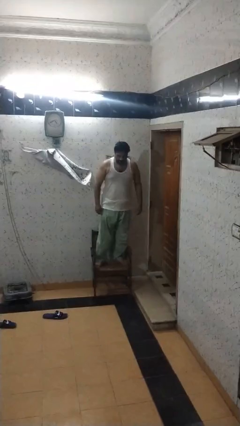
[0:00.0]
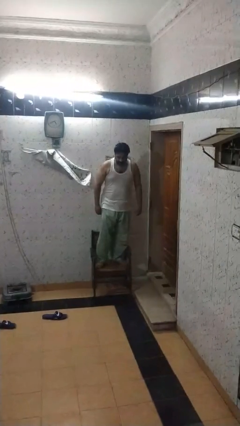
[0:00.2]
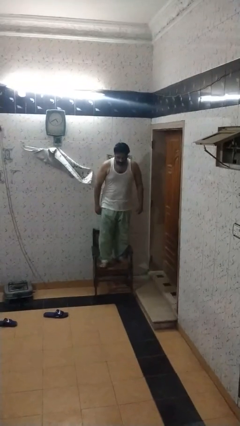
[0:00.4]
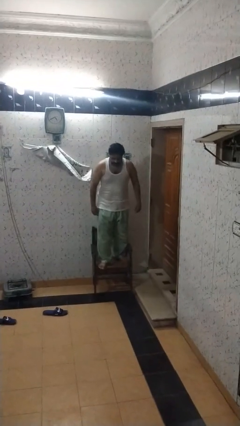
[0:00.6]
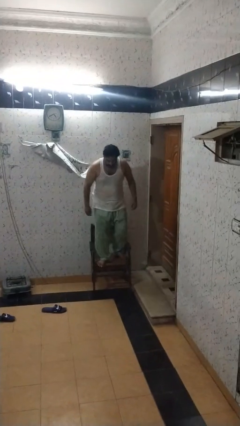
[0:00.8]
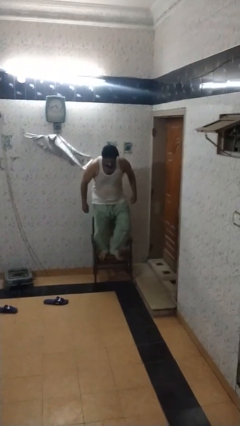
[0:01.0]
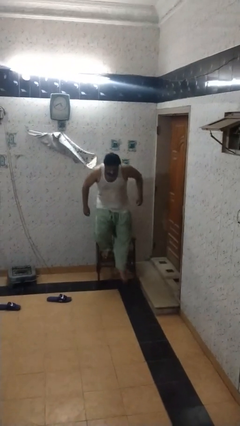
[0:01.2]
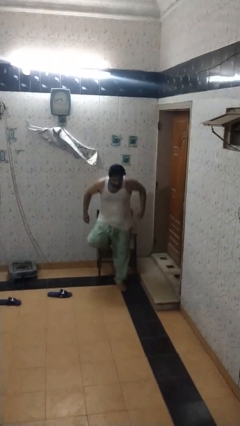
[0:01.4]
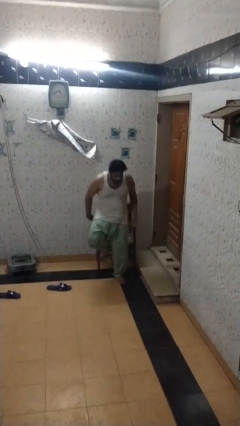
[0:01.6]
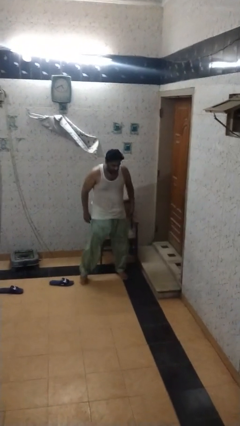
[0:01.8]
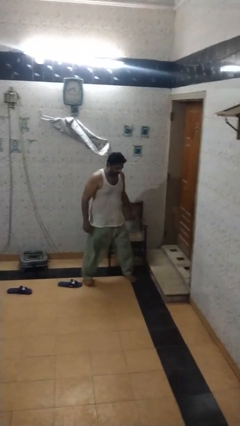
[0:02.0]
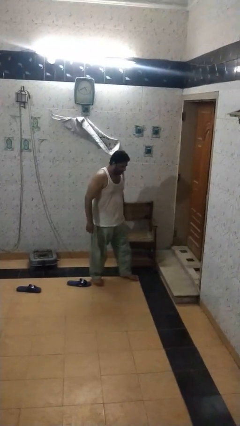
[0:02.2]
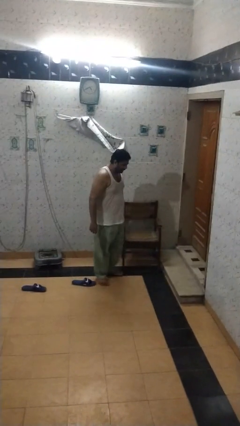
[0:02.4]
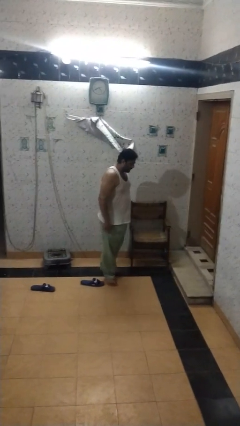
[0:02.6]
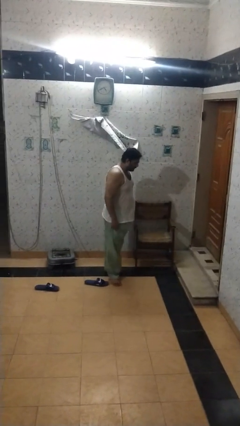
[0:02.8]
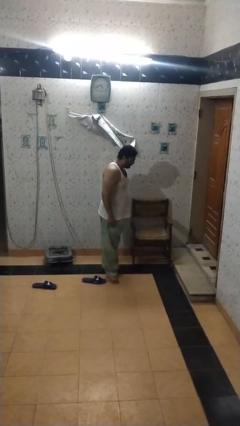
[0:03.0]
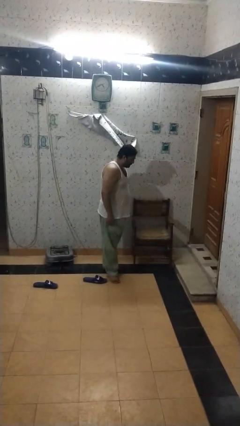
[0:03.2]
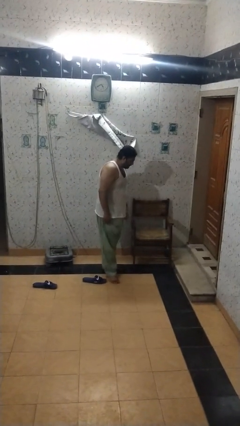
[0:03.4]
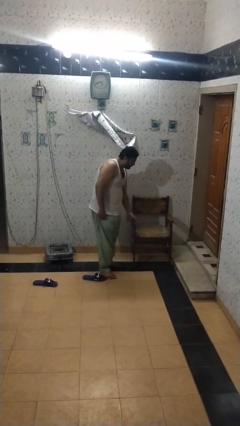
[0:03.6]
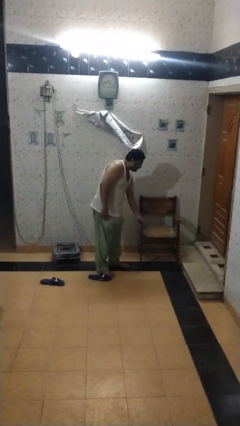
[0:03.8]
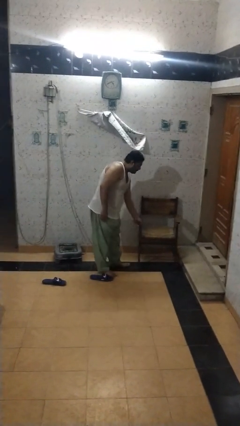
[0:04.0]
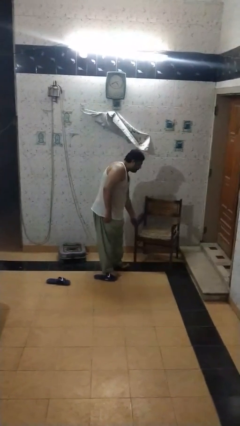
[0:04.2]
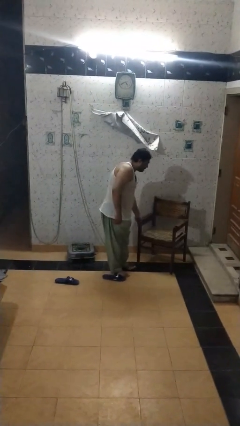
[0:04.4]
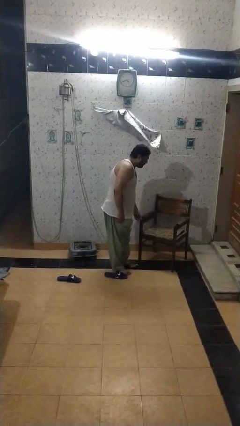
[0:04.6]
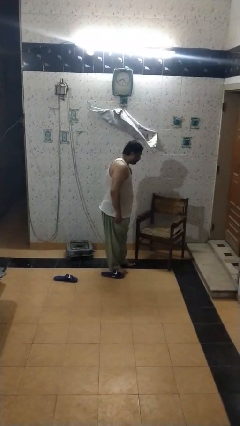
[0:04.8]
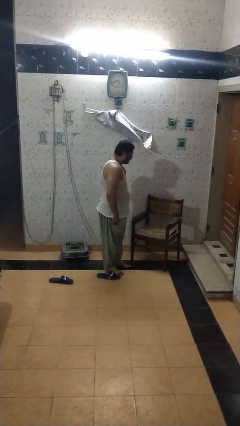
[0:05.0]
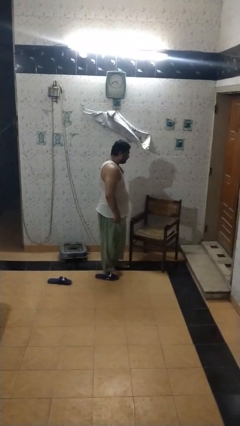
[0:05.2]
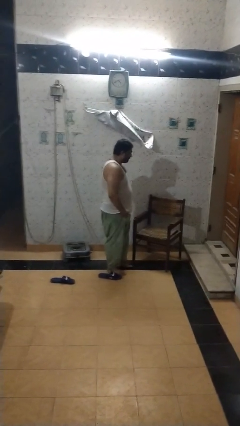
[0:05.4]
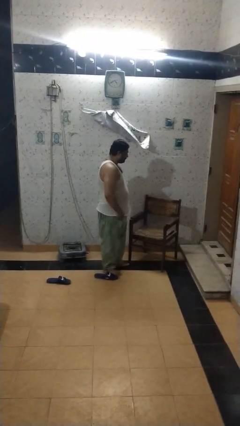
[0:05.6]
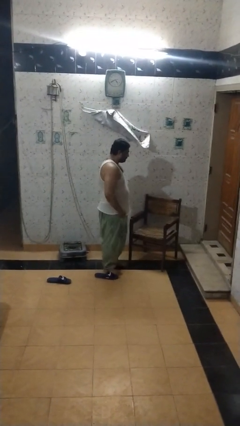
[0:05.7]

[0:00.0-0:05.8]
person climbs off chair

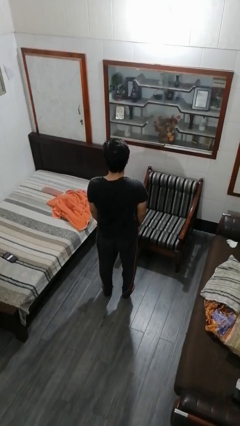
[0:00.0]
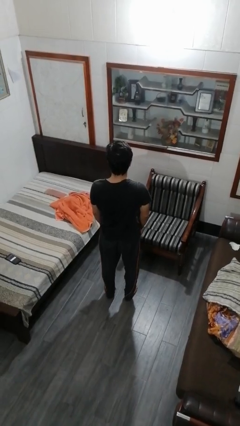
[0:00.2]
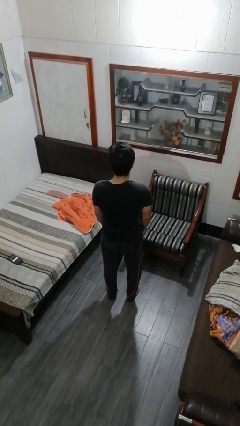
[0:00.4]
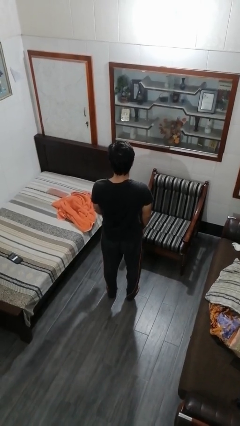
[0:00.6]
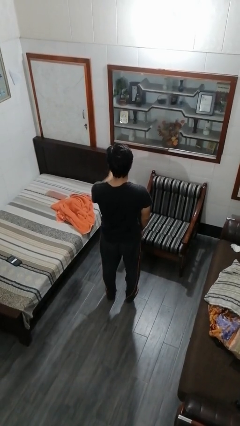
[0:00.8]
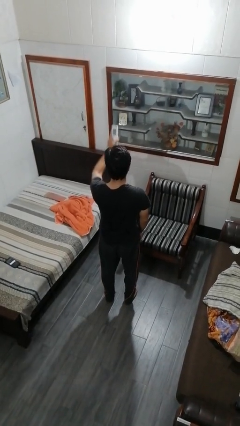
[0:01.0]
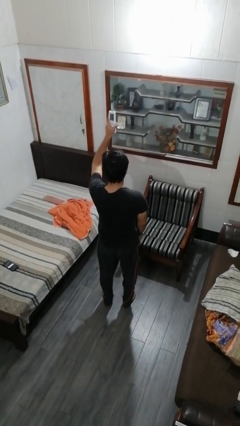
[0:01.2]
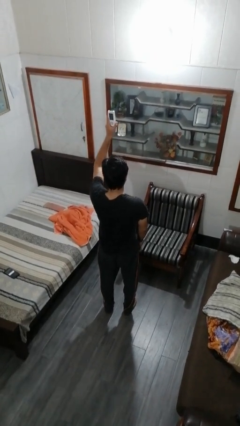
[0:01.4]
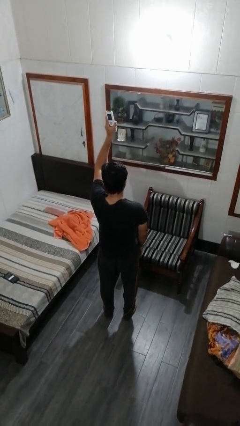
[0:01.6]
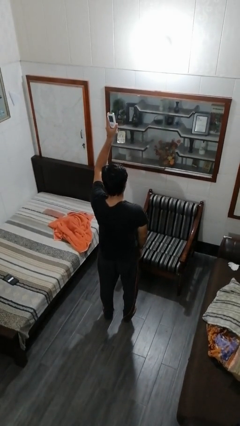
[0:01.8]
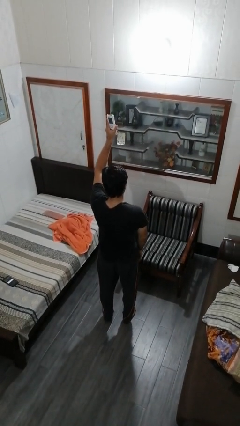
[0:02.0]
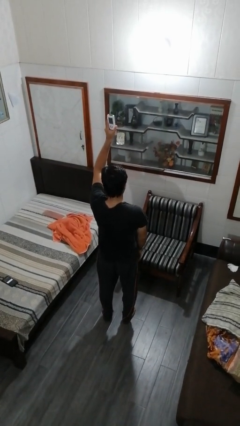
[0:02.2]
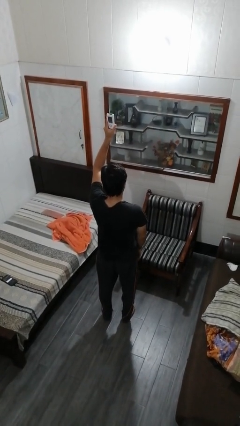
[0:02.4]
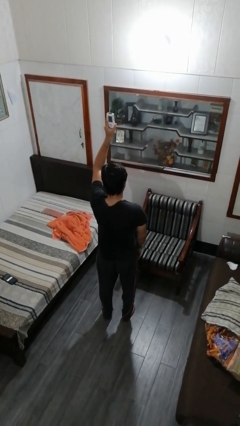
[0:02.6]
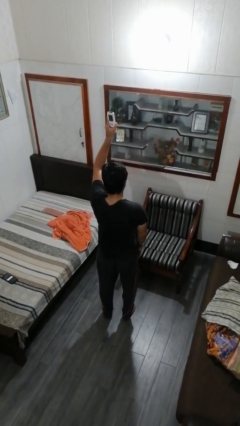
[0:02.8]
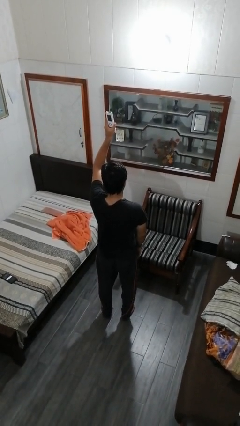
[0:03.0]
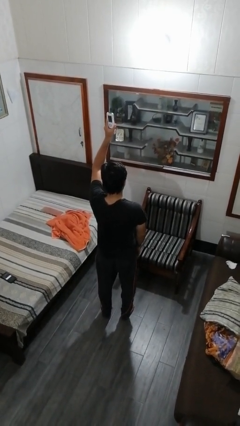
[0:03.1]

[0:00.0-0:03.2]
person holds object above head

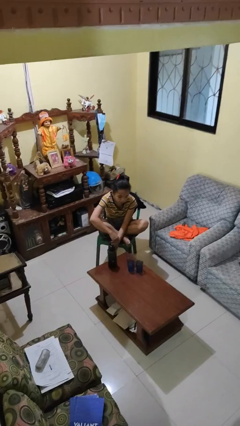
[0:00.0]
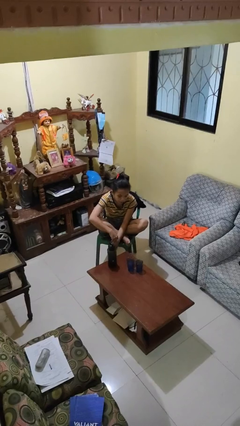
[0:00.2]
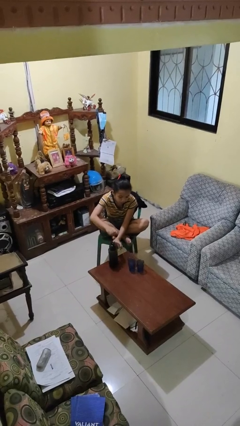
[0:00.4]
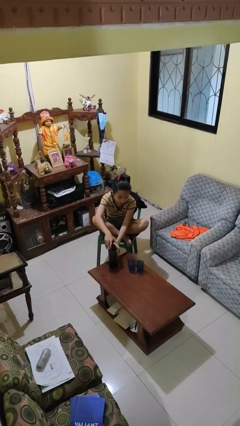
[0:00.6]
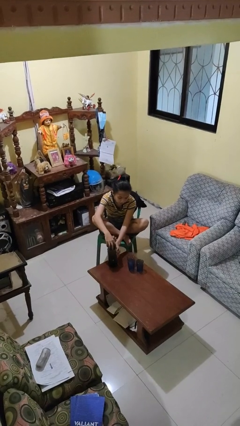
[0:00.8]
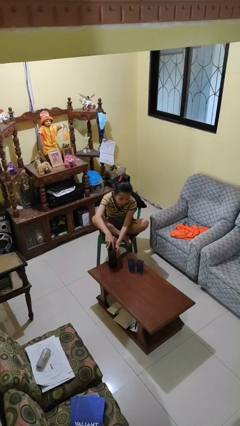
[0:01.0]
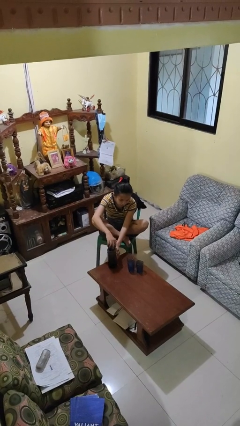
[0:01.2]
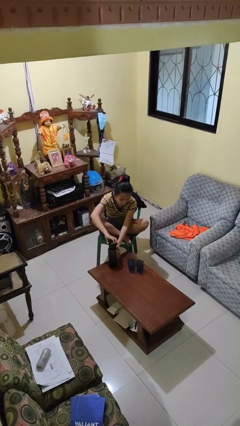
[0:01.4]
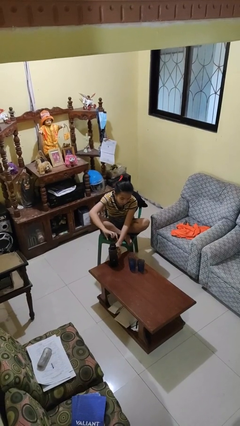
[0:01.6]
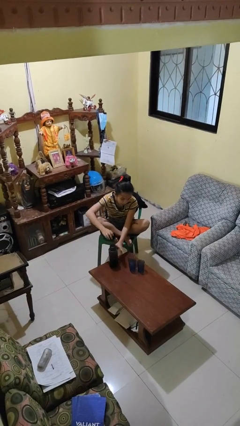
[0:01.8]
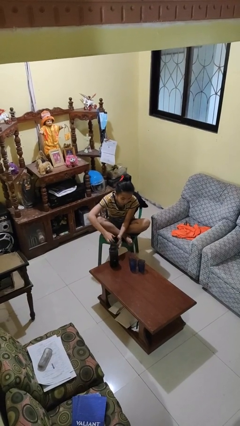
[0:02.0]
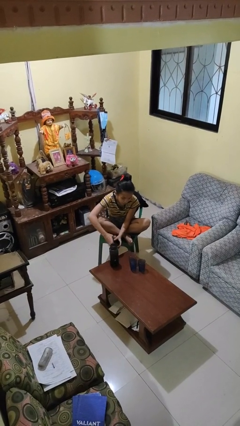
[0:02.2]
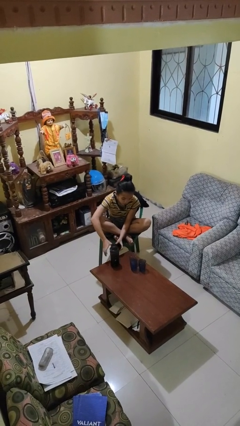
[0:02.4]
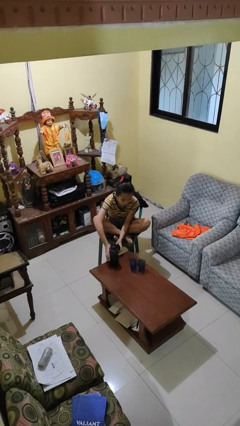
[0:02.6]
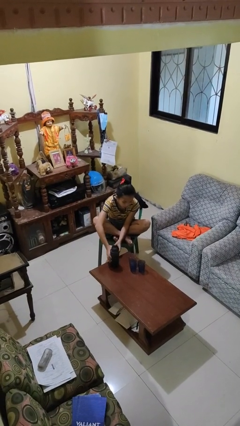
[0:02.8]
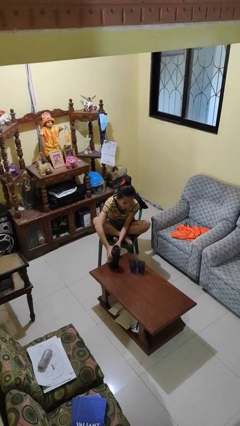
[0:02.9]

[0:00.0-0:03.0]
person unscrews lid from bottle

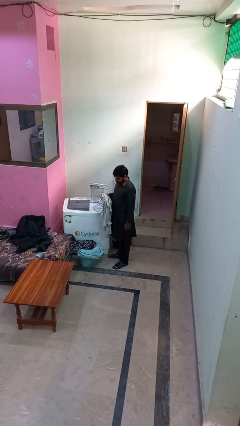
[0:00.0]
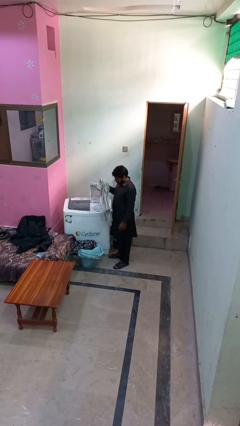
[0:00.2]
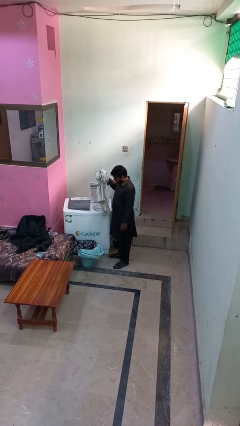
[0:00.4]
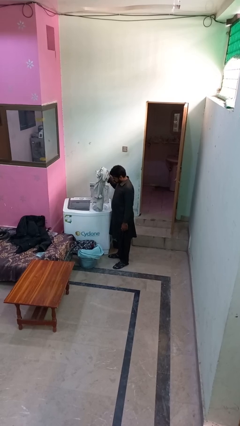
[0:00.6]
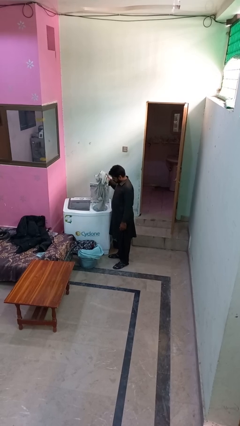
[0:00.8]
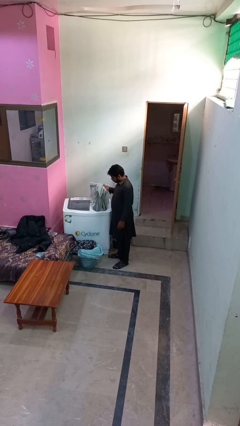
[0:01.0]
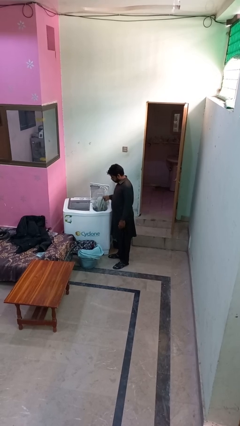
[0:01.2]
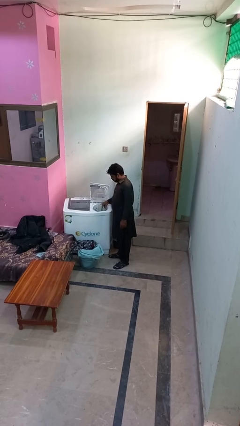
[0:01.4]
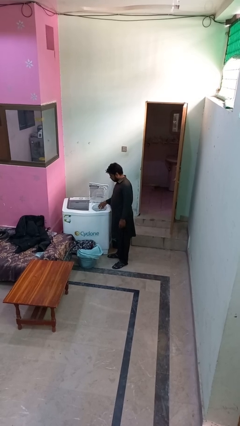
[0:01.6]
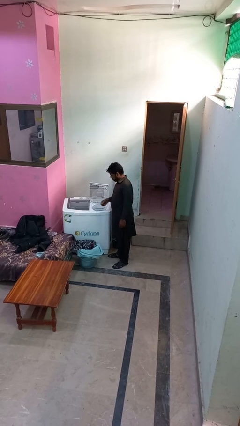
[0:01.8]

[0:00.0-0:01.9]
person loads dryer

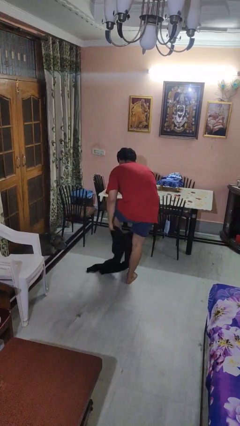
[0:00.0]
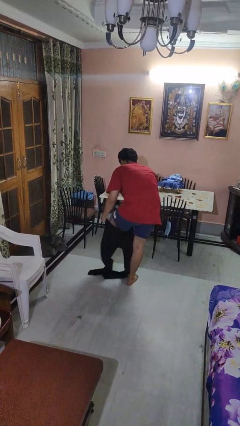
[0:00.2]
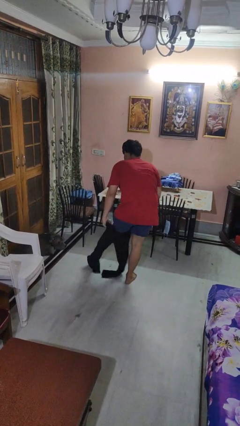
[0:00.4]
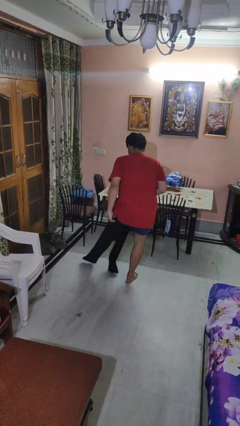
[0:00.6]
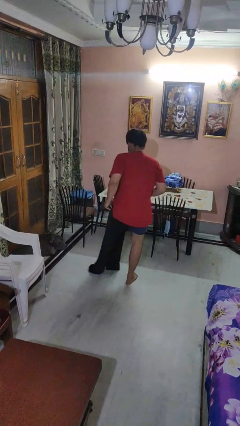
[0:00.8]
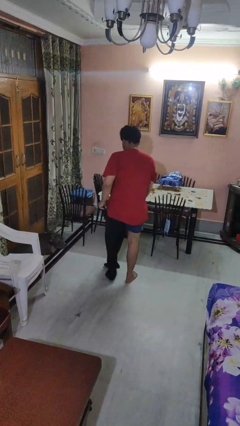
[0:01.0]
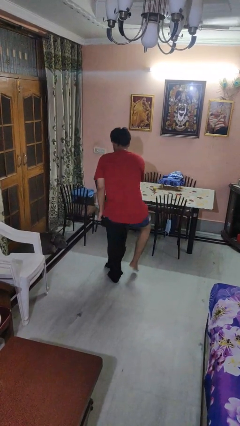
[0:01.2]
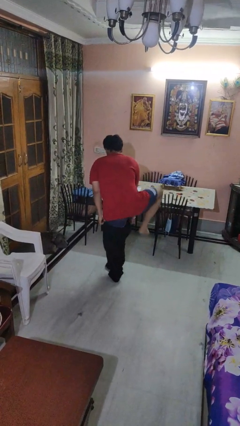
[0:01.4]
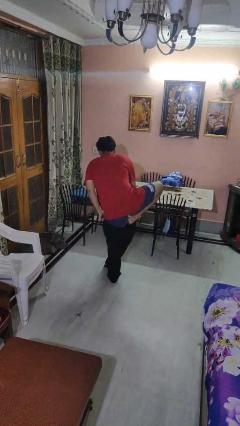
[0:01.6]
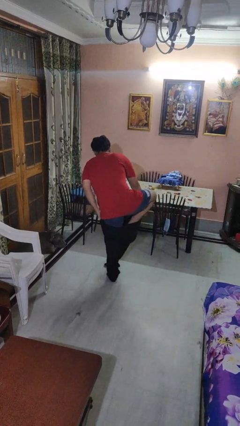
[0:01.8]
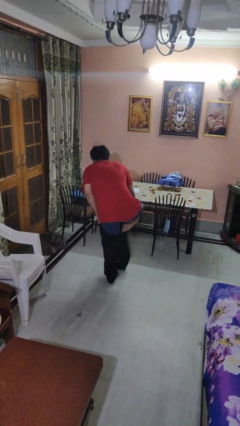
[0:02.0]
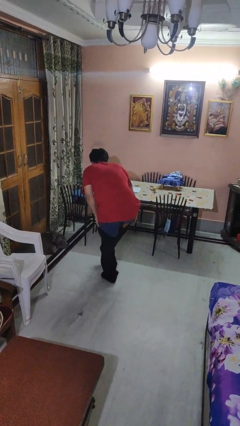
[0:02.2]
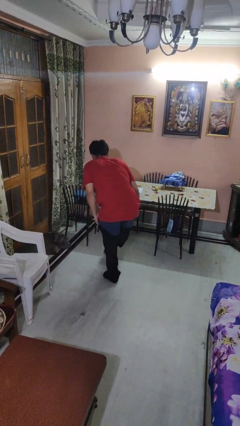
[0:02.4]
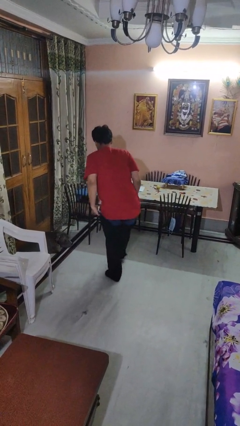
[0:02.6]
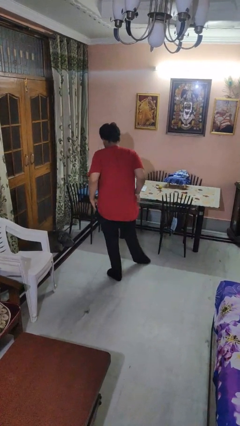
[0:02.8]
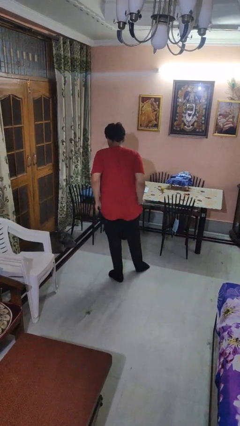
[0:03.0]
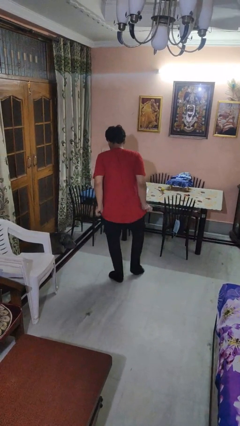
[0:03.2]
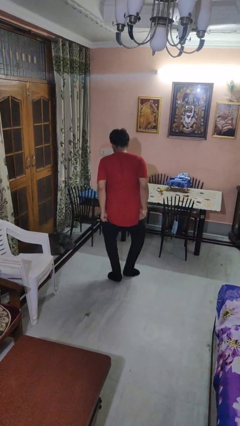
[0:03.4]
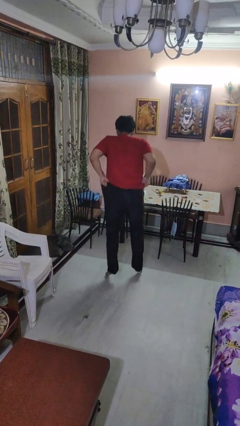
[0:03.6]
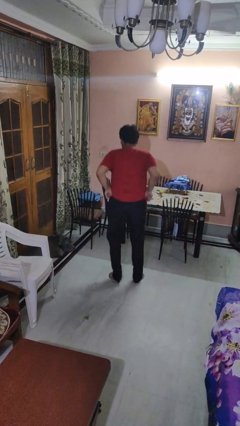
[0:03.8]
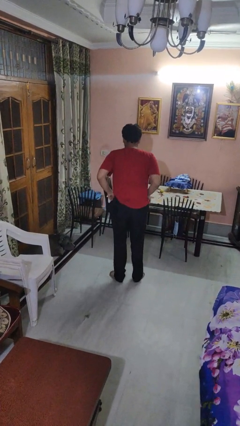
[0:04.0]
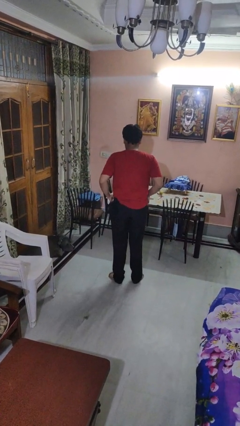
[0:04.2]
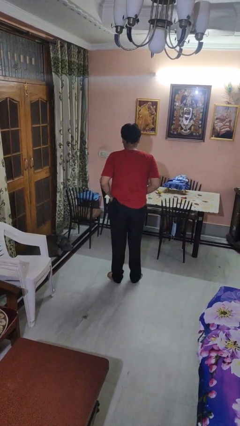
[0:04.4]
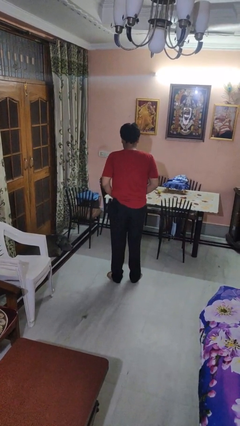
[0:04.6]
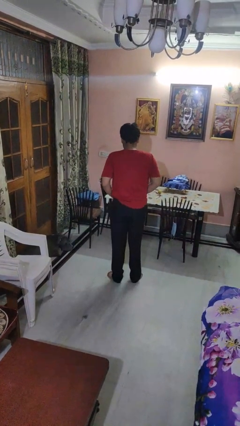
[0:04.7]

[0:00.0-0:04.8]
person puts on pants
